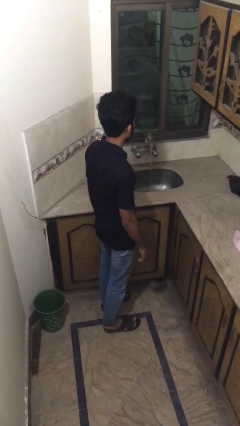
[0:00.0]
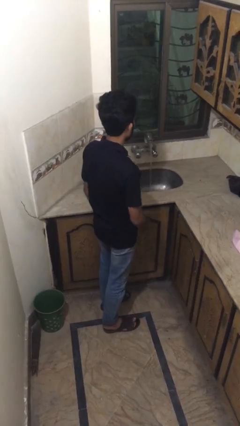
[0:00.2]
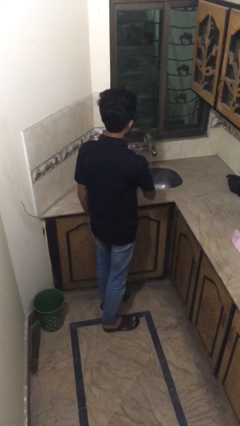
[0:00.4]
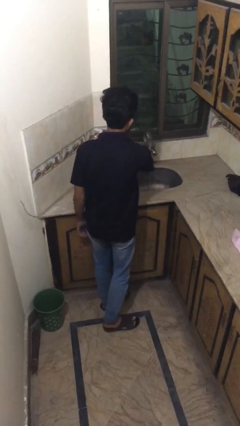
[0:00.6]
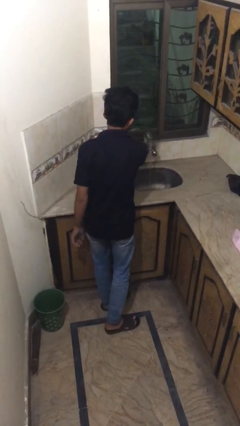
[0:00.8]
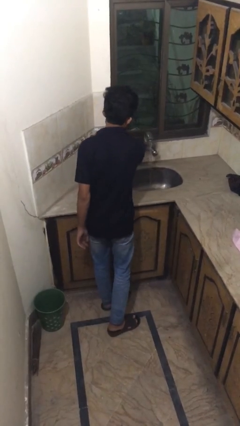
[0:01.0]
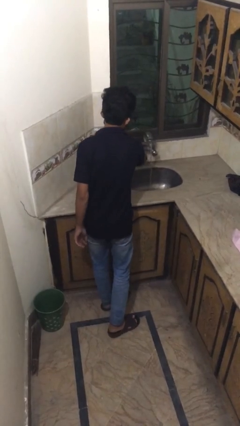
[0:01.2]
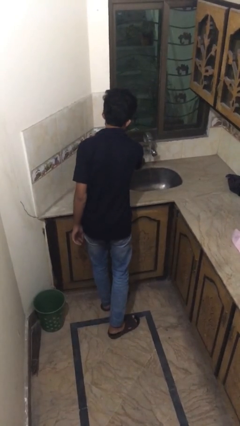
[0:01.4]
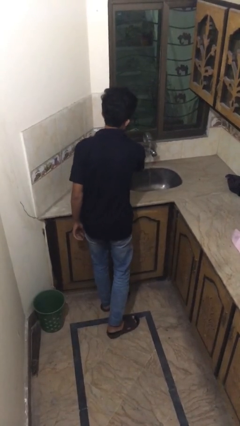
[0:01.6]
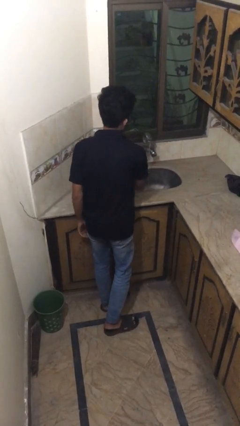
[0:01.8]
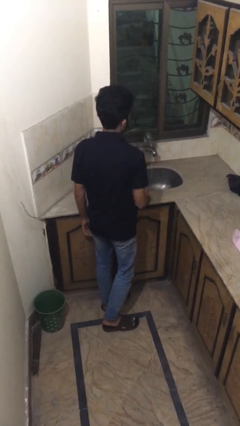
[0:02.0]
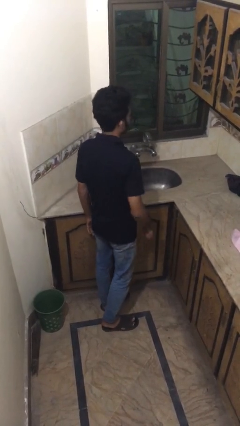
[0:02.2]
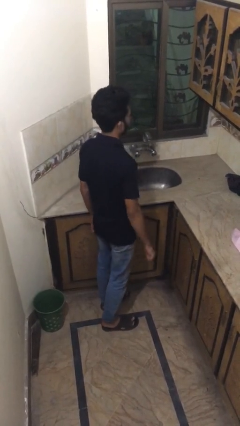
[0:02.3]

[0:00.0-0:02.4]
person turns off faucet

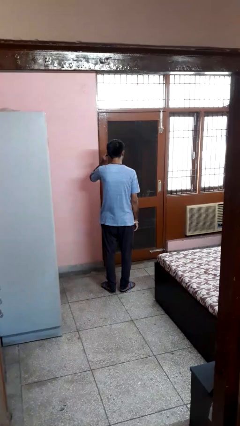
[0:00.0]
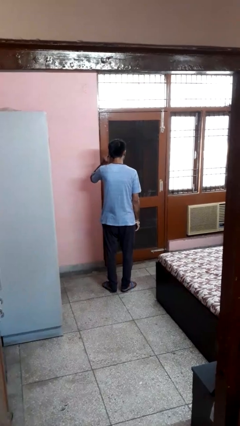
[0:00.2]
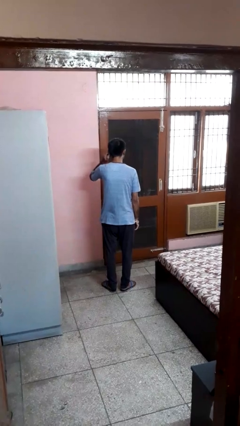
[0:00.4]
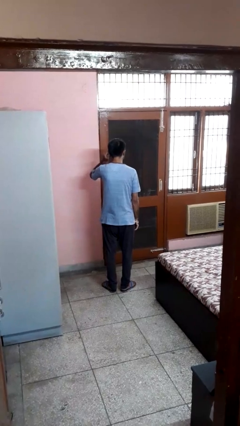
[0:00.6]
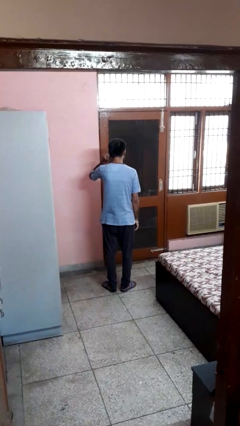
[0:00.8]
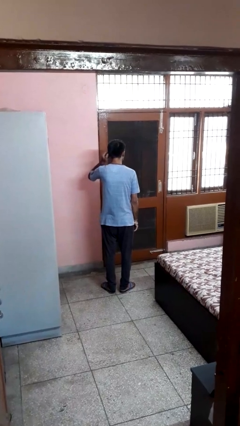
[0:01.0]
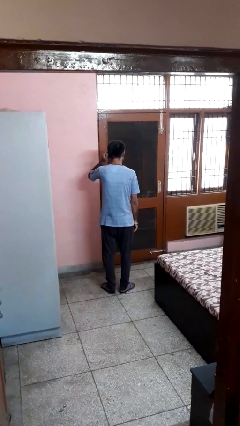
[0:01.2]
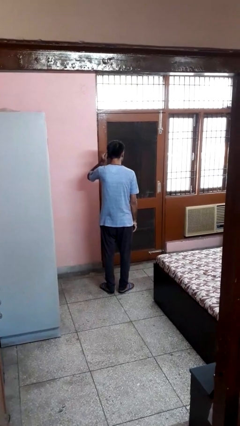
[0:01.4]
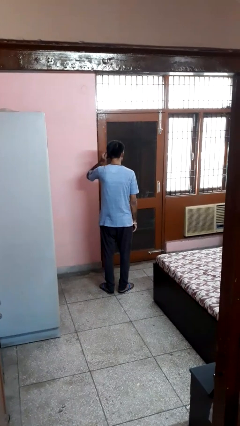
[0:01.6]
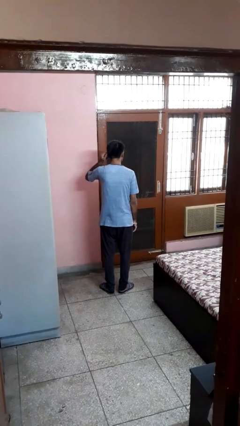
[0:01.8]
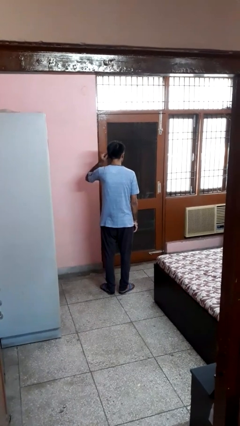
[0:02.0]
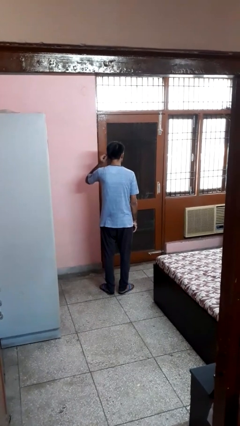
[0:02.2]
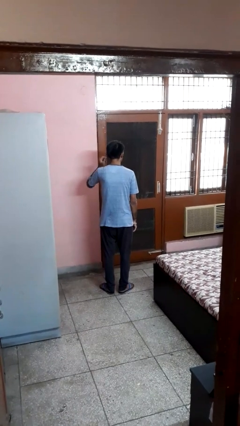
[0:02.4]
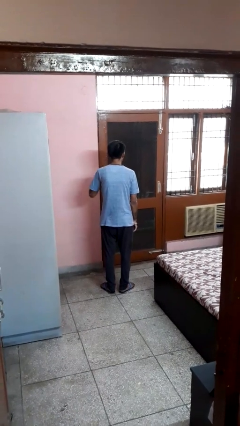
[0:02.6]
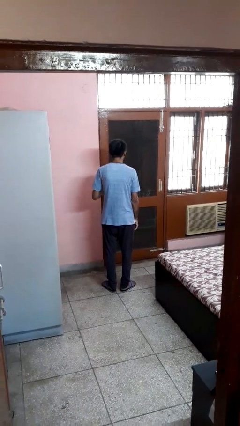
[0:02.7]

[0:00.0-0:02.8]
person touches earlobe

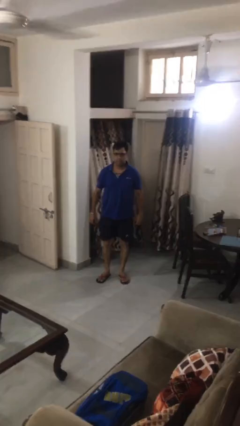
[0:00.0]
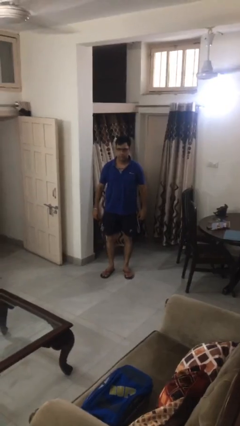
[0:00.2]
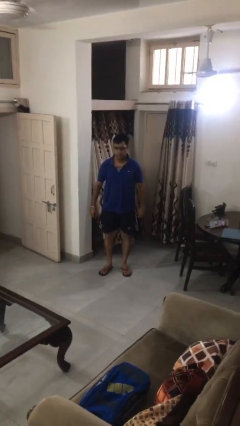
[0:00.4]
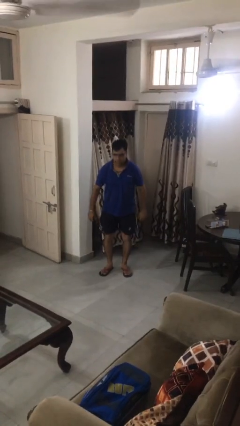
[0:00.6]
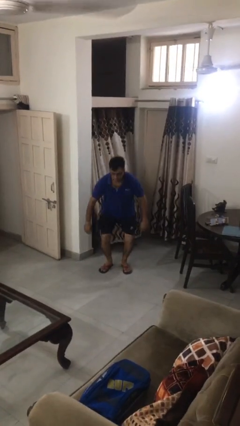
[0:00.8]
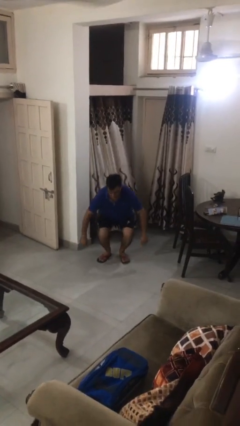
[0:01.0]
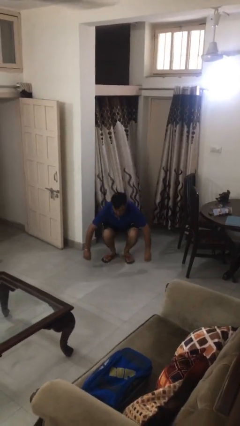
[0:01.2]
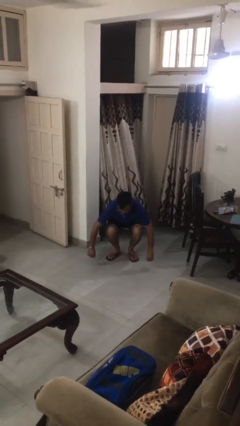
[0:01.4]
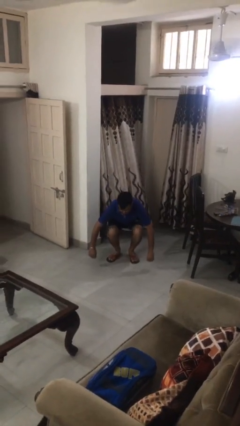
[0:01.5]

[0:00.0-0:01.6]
person squats

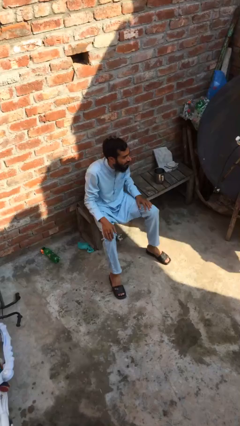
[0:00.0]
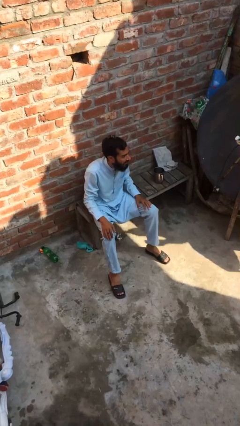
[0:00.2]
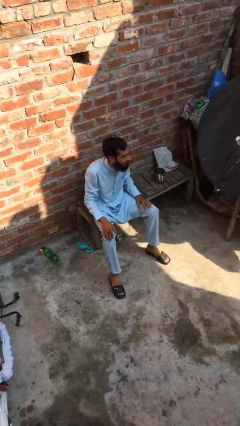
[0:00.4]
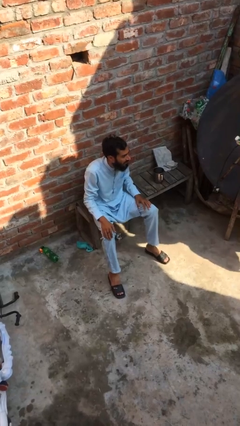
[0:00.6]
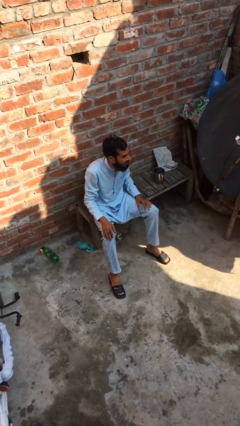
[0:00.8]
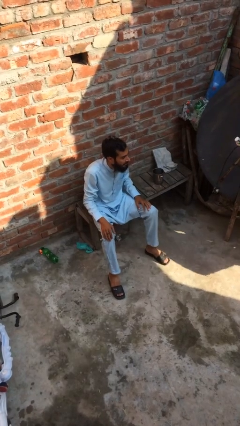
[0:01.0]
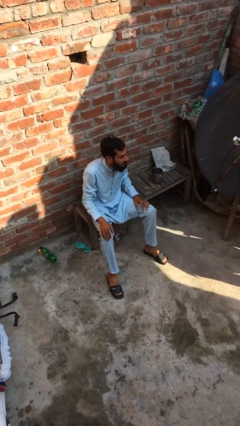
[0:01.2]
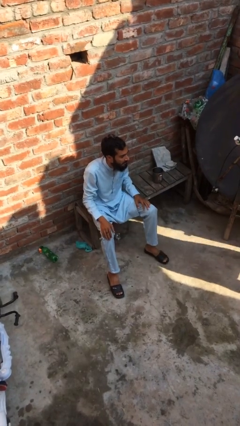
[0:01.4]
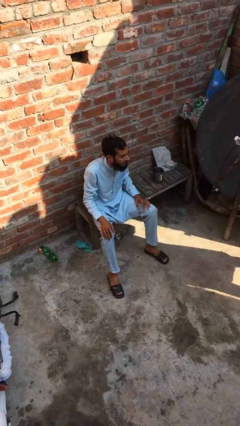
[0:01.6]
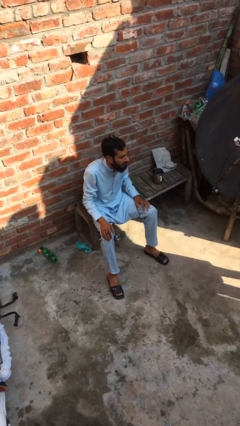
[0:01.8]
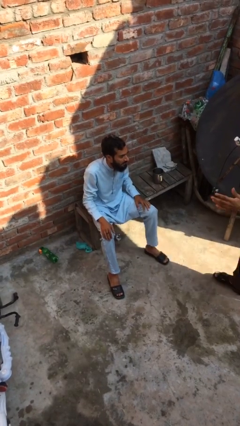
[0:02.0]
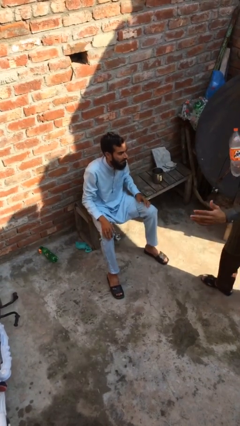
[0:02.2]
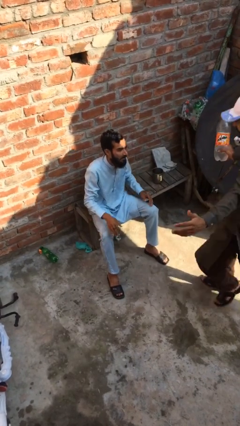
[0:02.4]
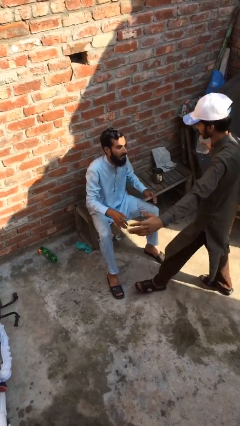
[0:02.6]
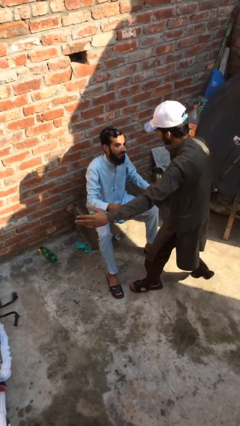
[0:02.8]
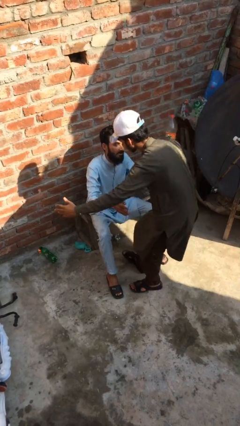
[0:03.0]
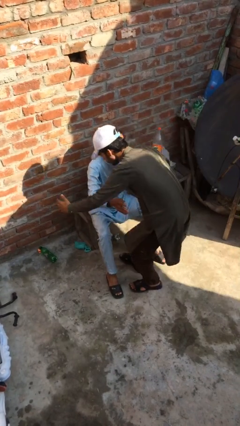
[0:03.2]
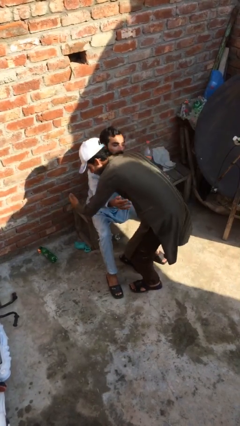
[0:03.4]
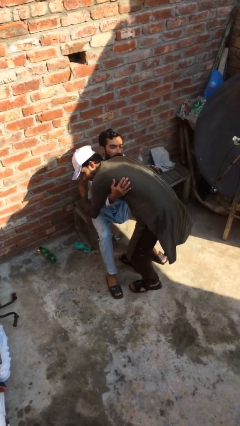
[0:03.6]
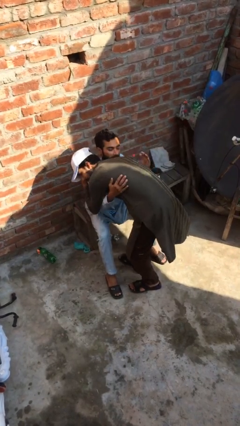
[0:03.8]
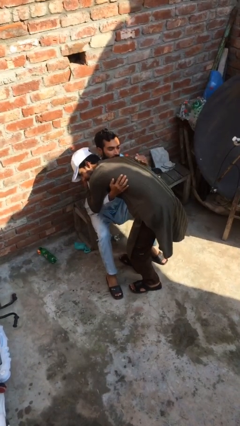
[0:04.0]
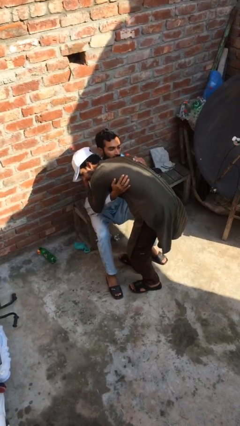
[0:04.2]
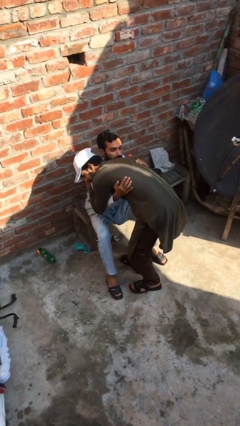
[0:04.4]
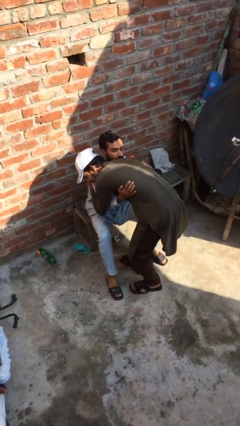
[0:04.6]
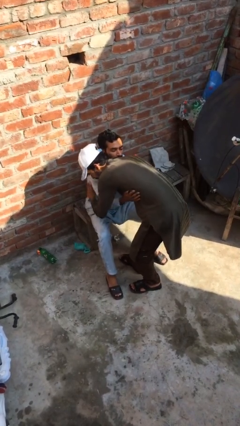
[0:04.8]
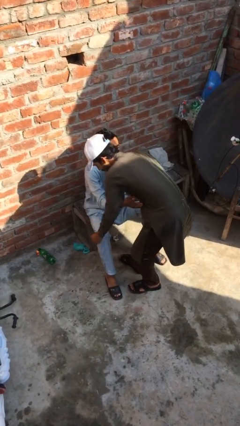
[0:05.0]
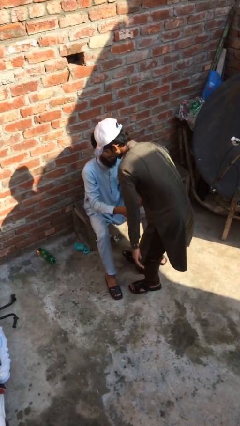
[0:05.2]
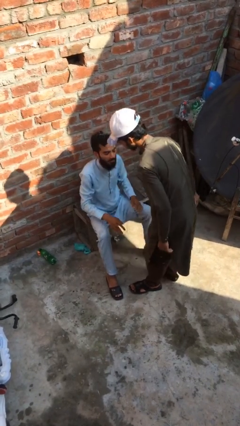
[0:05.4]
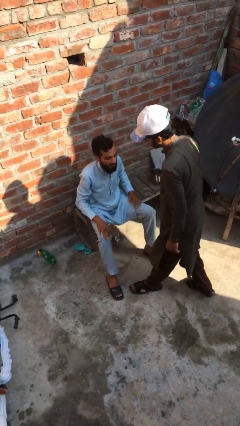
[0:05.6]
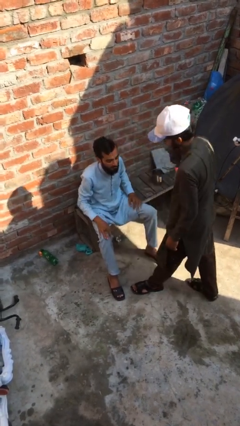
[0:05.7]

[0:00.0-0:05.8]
person embraces person

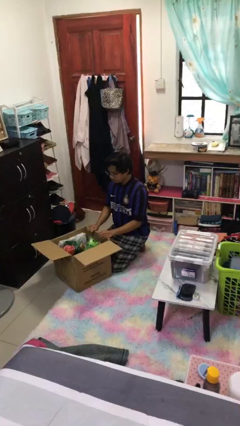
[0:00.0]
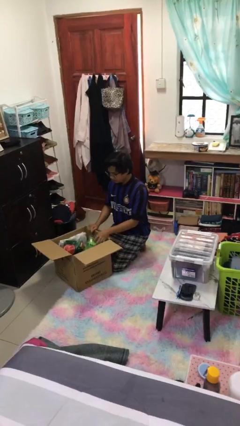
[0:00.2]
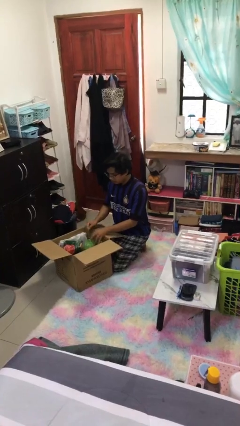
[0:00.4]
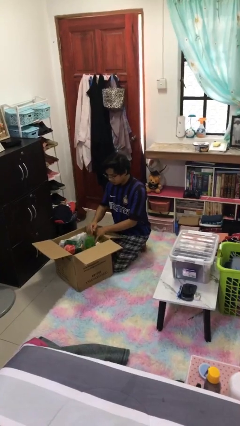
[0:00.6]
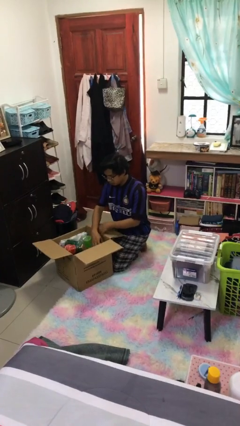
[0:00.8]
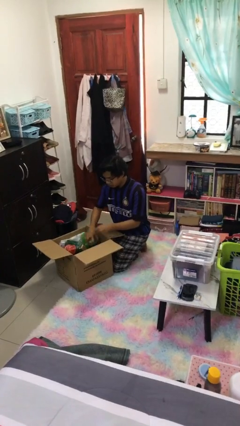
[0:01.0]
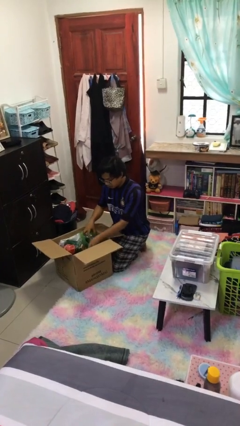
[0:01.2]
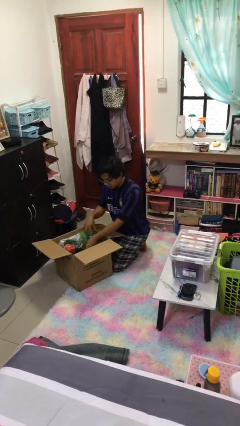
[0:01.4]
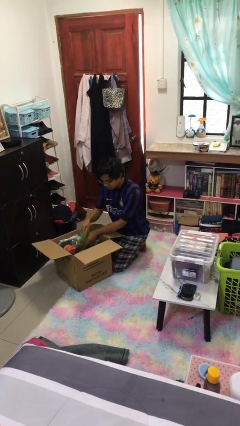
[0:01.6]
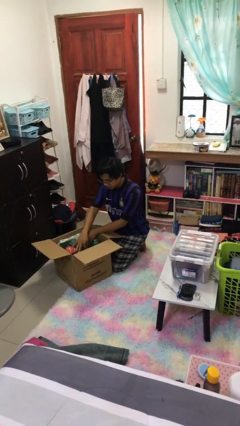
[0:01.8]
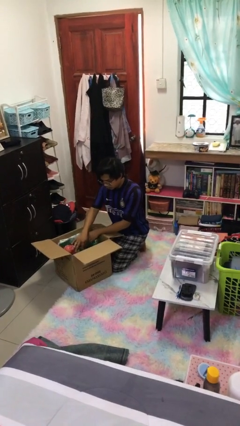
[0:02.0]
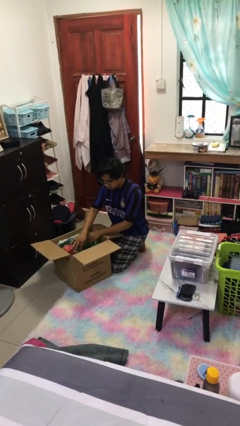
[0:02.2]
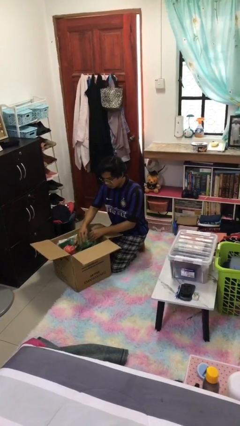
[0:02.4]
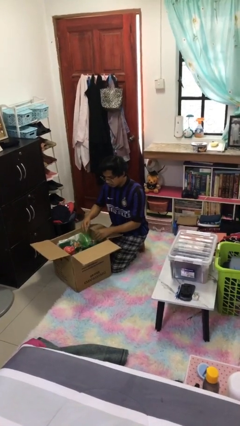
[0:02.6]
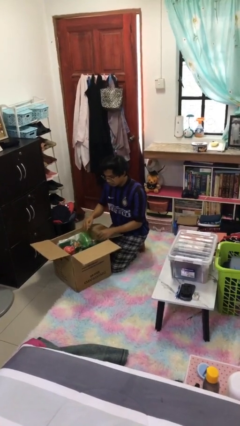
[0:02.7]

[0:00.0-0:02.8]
person searches in box

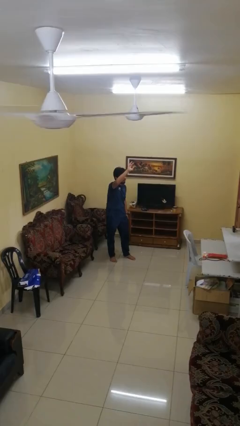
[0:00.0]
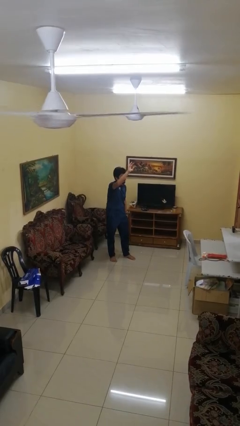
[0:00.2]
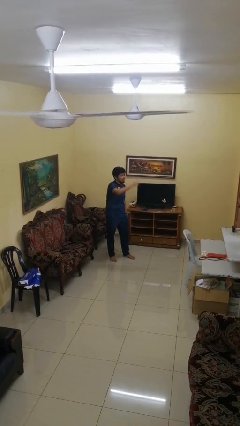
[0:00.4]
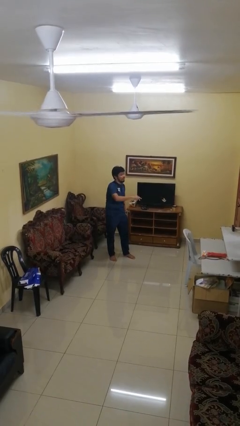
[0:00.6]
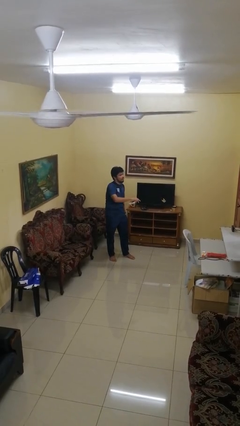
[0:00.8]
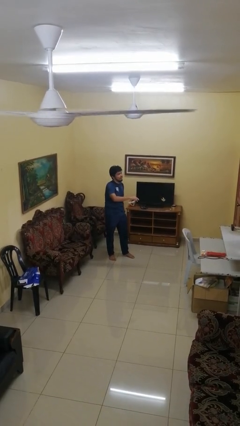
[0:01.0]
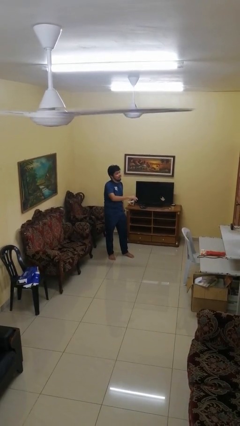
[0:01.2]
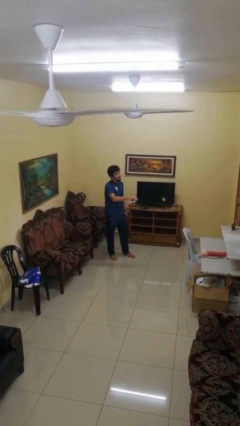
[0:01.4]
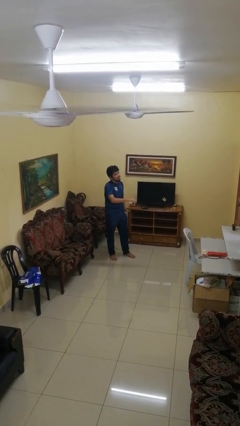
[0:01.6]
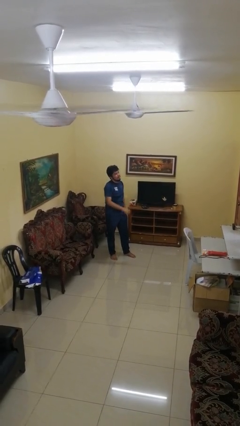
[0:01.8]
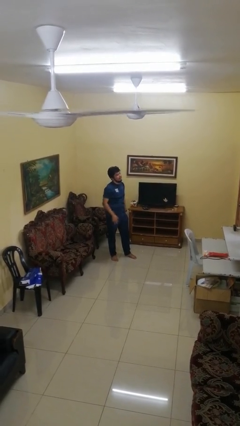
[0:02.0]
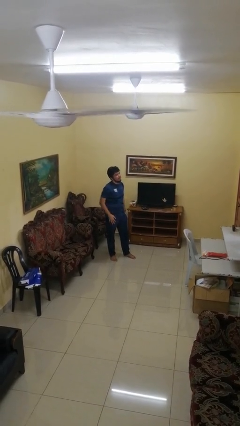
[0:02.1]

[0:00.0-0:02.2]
person gestures swipe down
